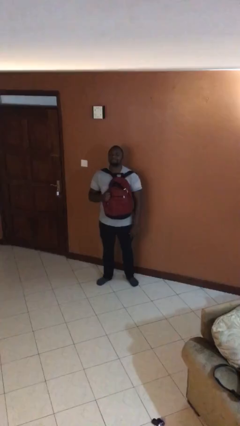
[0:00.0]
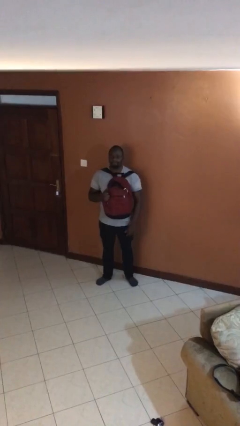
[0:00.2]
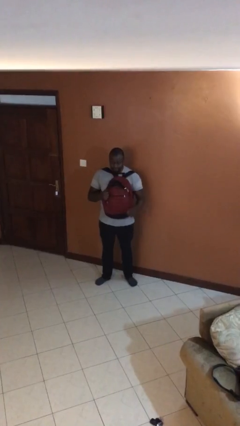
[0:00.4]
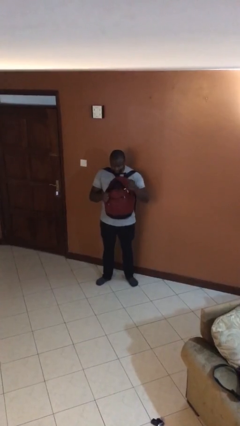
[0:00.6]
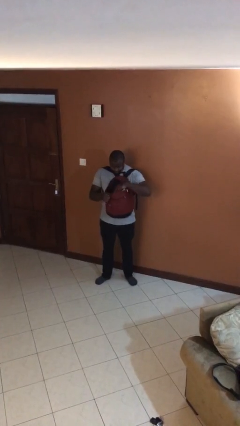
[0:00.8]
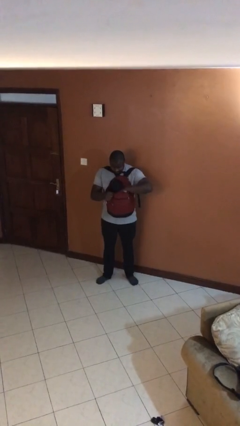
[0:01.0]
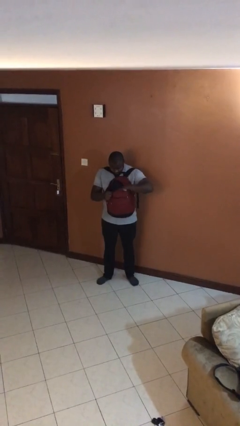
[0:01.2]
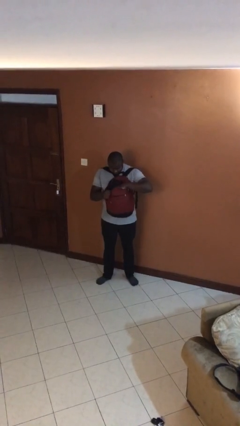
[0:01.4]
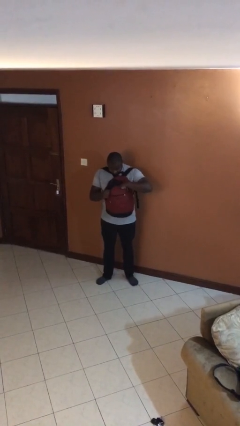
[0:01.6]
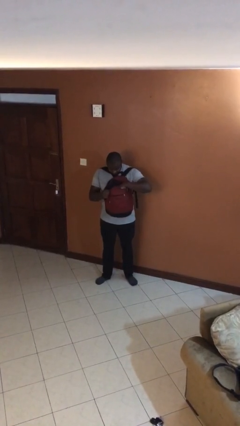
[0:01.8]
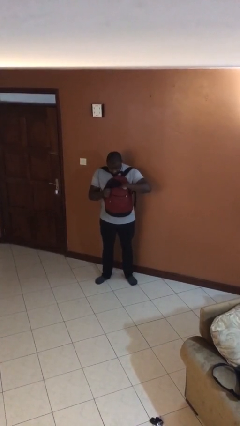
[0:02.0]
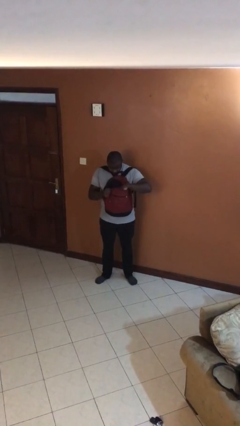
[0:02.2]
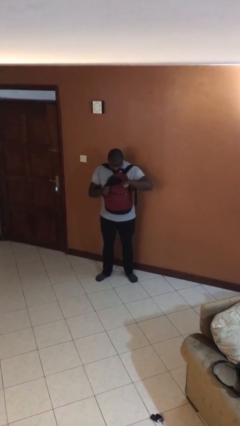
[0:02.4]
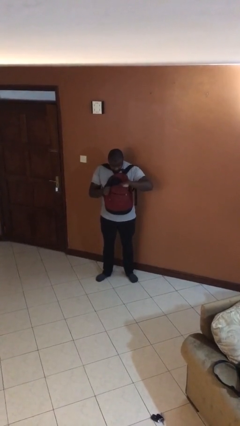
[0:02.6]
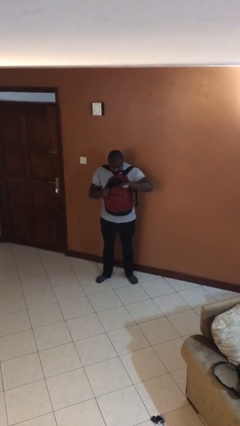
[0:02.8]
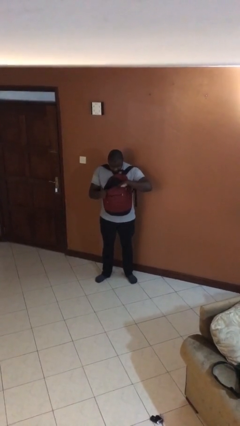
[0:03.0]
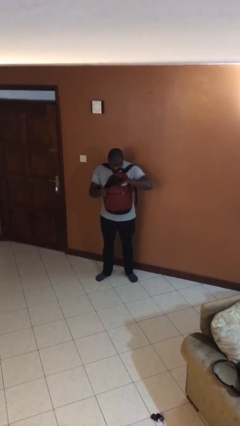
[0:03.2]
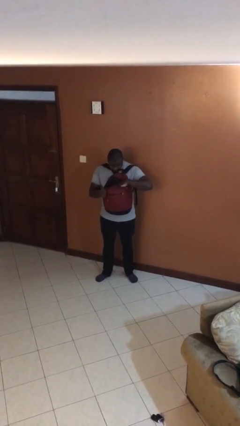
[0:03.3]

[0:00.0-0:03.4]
person searches in backpack

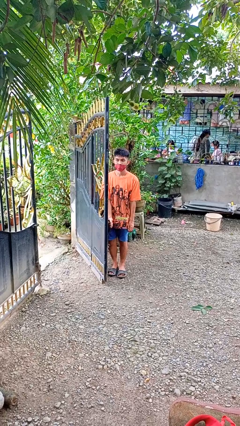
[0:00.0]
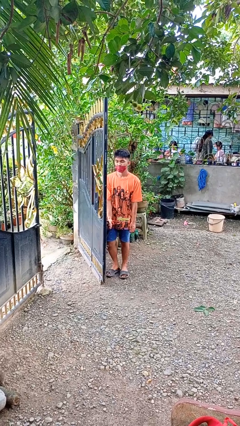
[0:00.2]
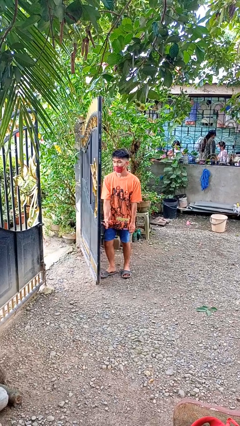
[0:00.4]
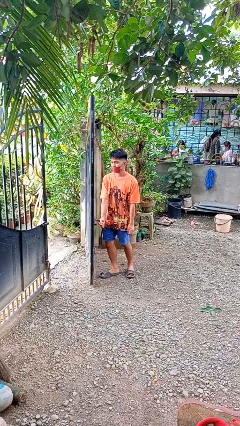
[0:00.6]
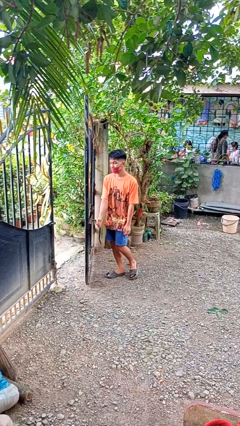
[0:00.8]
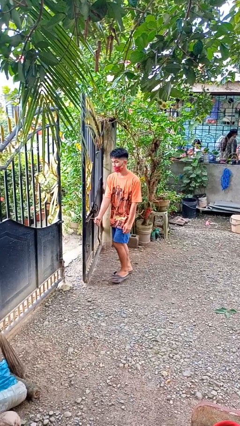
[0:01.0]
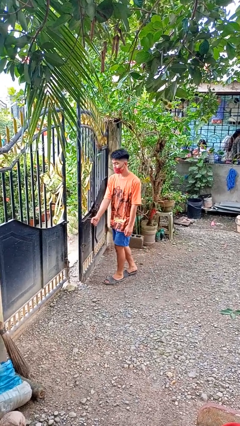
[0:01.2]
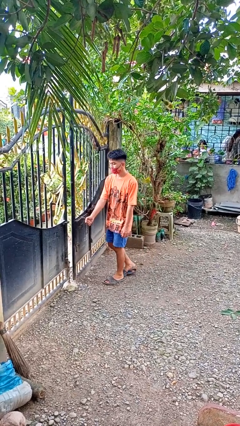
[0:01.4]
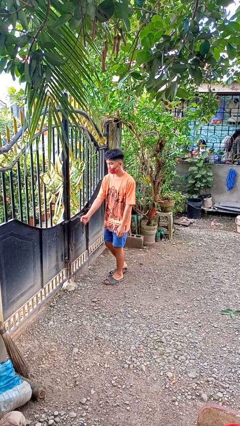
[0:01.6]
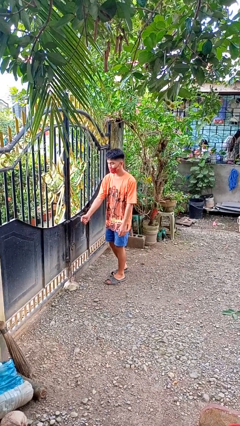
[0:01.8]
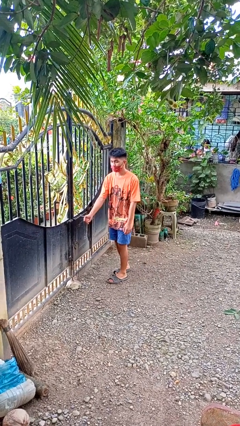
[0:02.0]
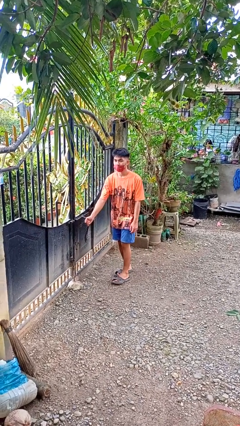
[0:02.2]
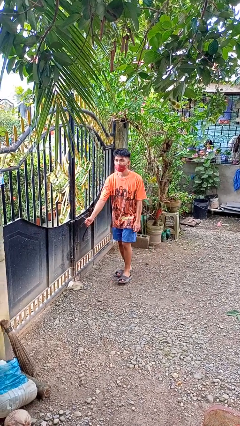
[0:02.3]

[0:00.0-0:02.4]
person closes gate

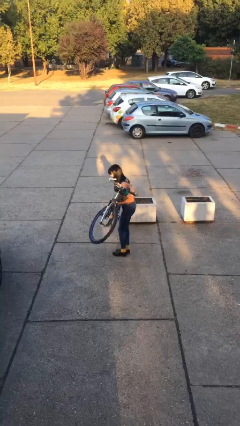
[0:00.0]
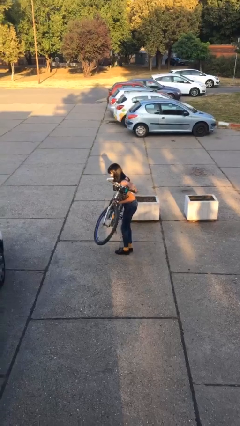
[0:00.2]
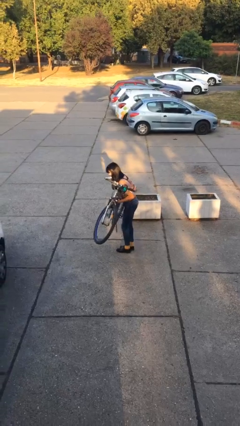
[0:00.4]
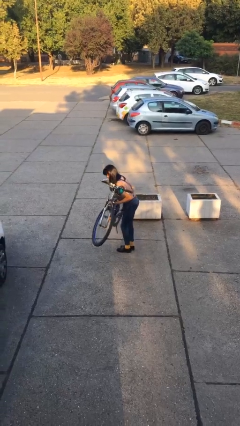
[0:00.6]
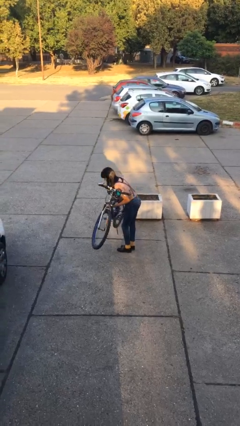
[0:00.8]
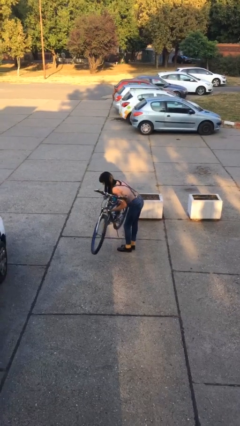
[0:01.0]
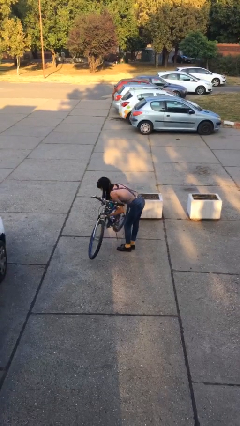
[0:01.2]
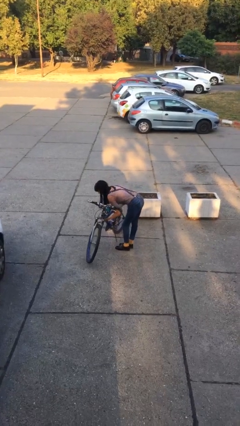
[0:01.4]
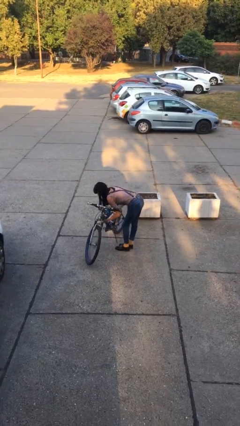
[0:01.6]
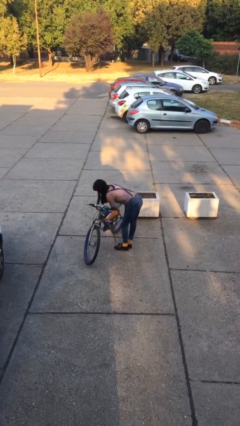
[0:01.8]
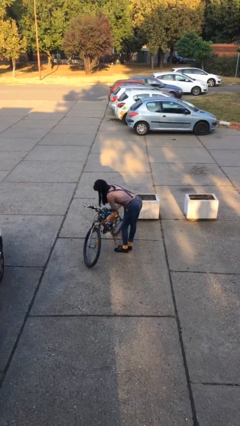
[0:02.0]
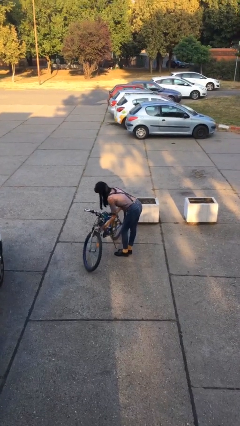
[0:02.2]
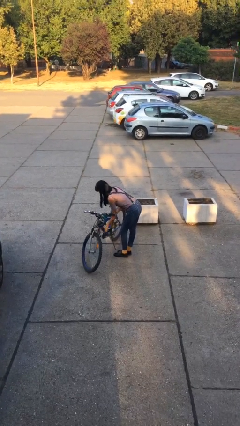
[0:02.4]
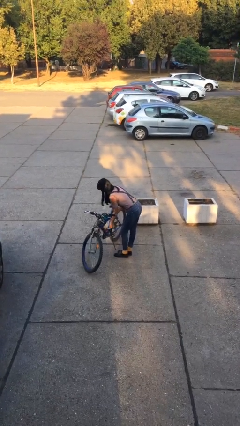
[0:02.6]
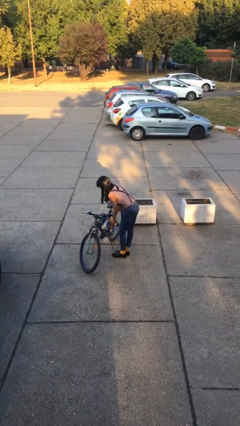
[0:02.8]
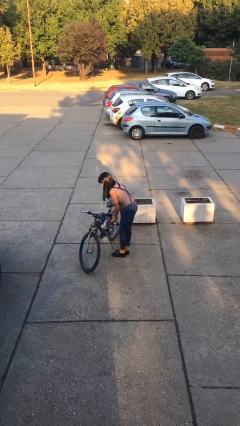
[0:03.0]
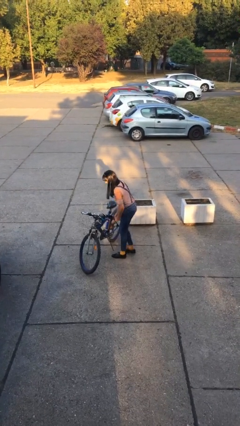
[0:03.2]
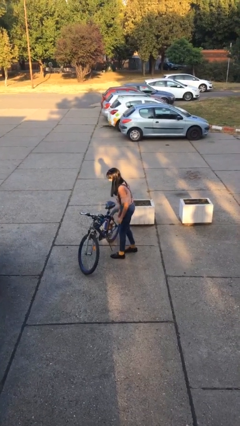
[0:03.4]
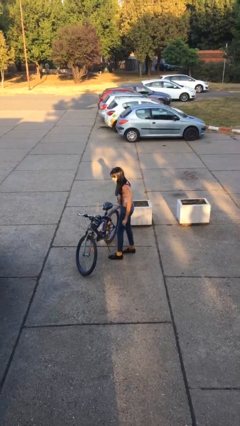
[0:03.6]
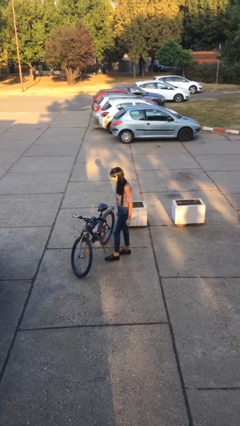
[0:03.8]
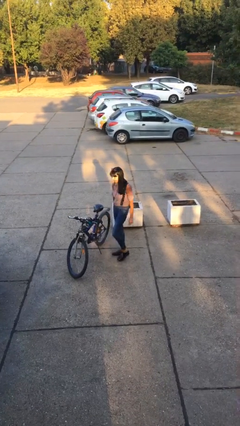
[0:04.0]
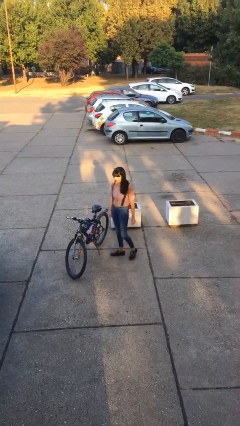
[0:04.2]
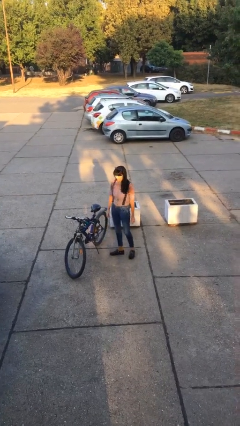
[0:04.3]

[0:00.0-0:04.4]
person puts down object on floor

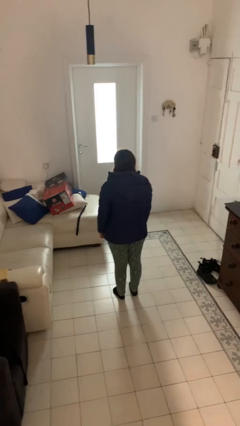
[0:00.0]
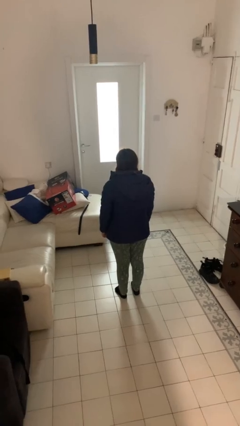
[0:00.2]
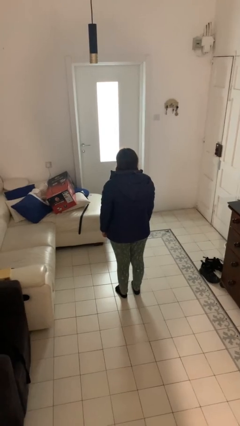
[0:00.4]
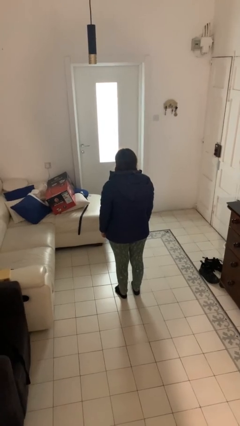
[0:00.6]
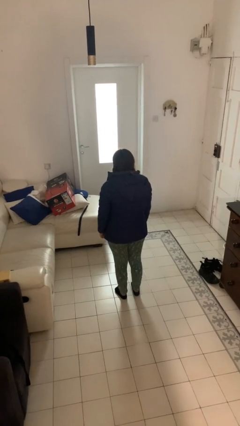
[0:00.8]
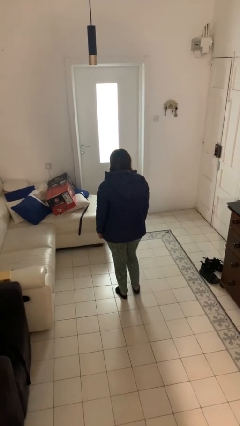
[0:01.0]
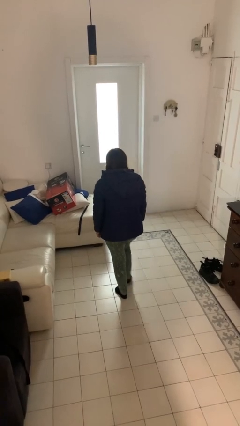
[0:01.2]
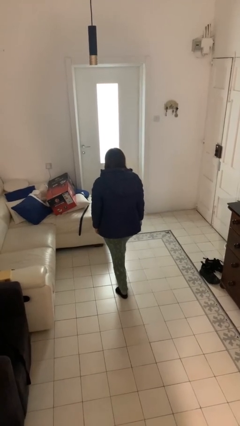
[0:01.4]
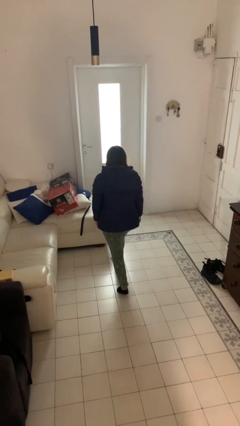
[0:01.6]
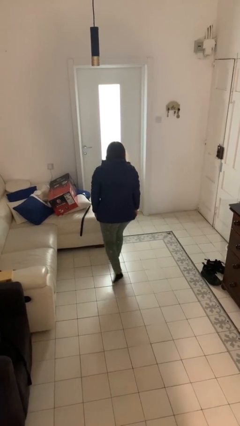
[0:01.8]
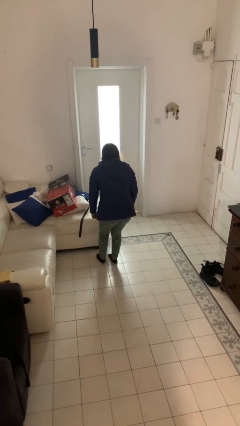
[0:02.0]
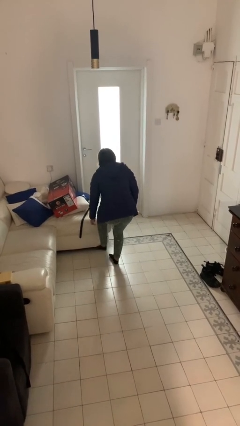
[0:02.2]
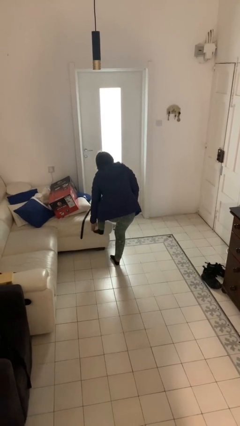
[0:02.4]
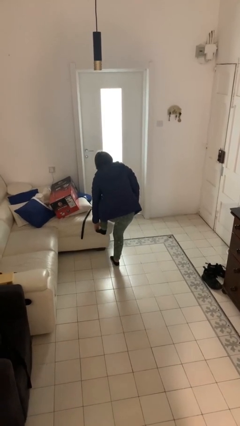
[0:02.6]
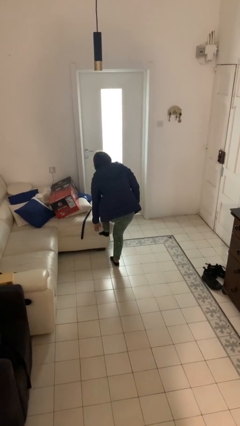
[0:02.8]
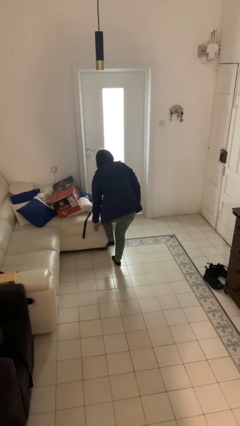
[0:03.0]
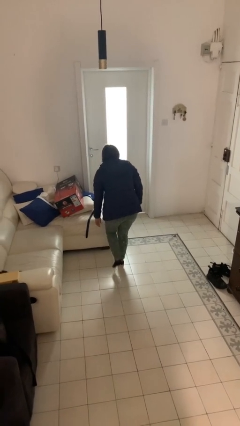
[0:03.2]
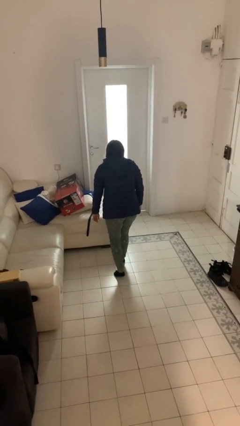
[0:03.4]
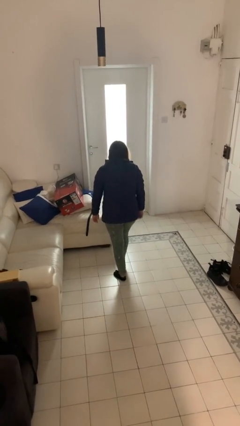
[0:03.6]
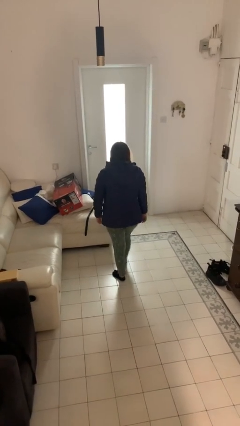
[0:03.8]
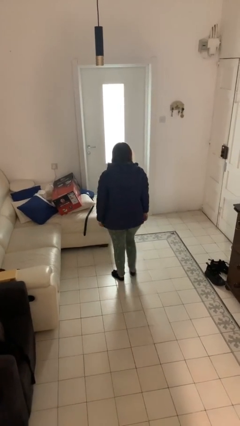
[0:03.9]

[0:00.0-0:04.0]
person stubs toe

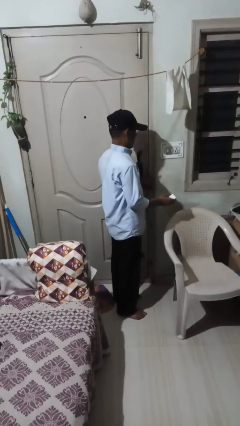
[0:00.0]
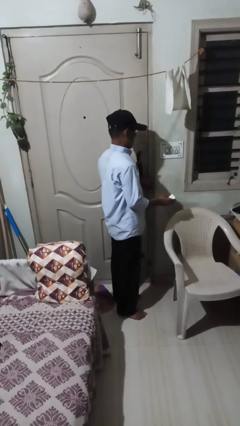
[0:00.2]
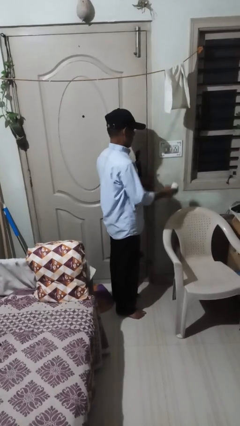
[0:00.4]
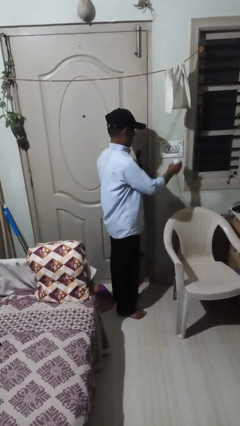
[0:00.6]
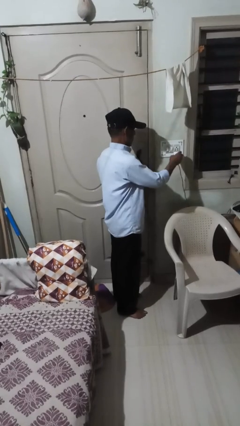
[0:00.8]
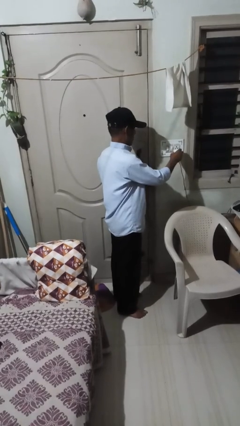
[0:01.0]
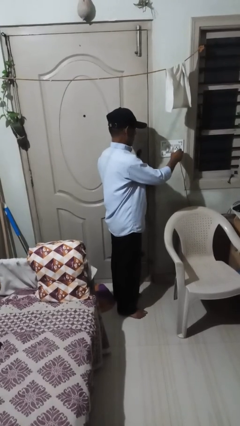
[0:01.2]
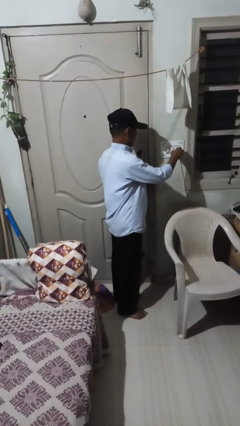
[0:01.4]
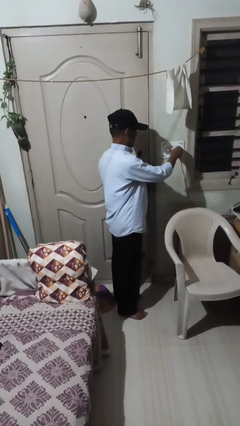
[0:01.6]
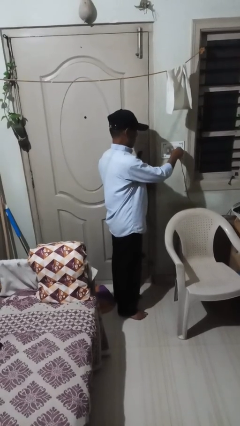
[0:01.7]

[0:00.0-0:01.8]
person plugs into electrical socket

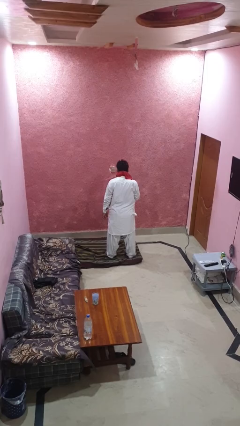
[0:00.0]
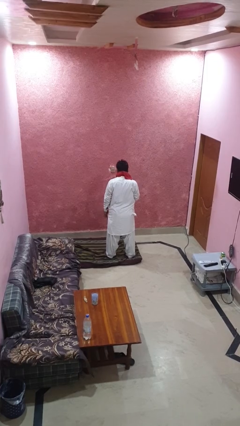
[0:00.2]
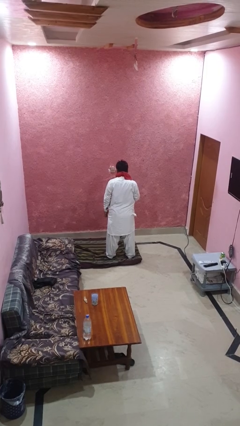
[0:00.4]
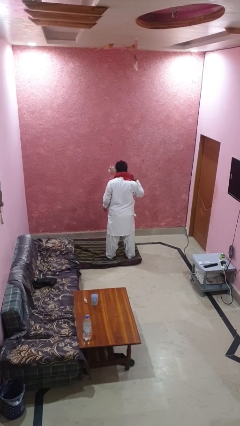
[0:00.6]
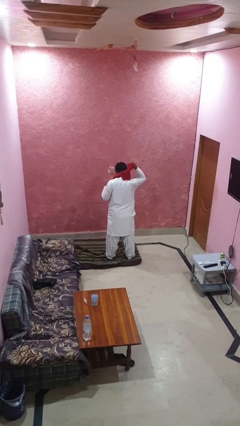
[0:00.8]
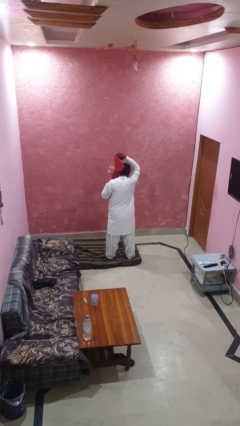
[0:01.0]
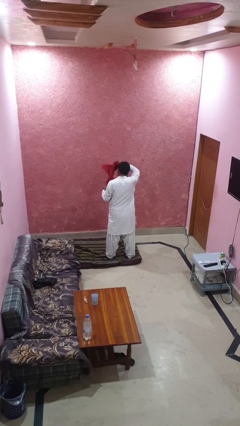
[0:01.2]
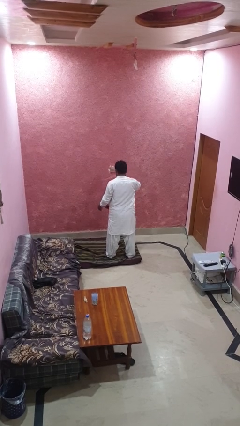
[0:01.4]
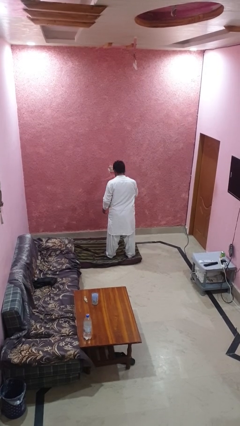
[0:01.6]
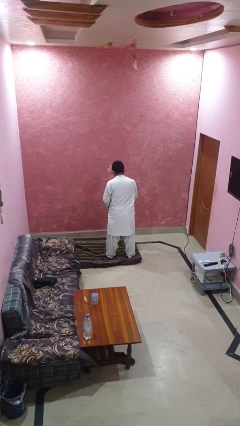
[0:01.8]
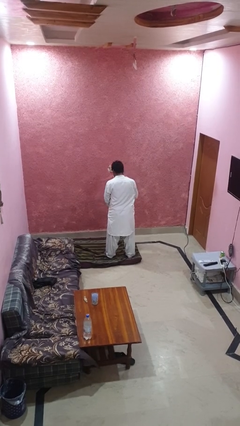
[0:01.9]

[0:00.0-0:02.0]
person takes off scarf
